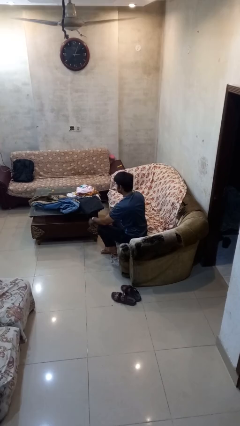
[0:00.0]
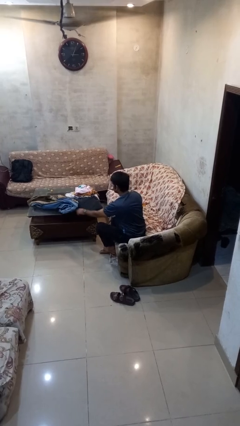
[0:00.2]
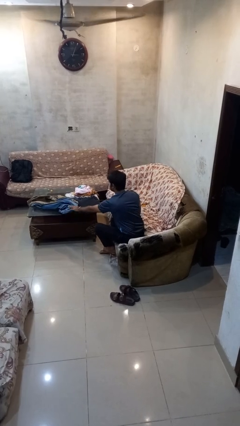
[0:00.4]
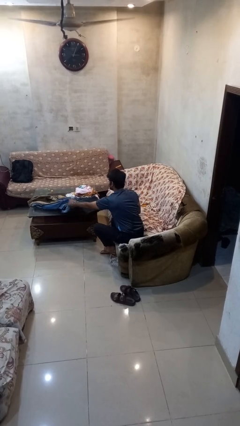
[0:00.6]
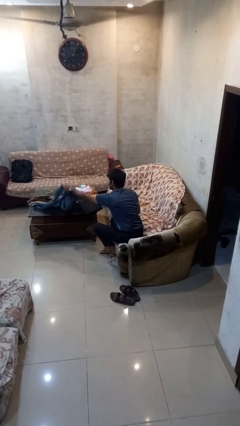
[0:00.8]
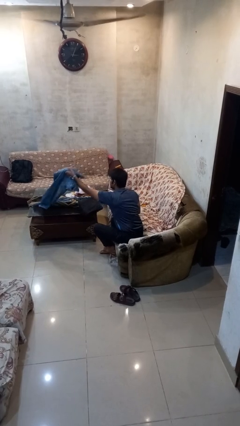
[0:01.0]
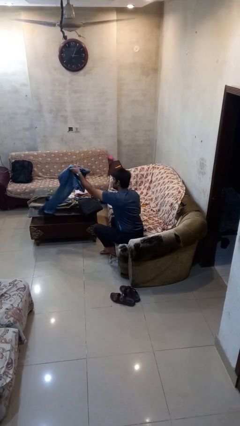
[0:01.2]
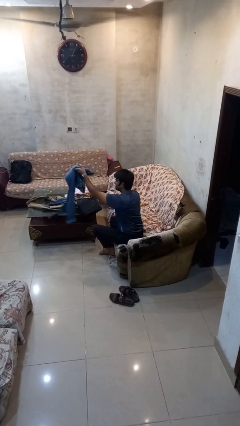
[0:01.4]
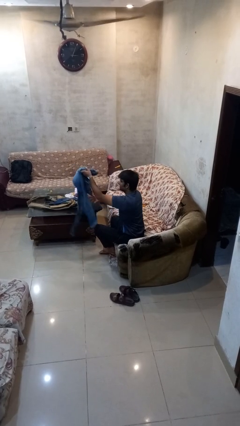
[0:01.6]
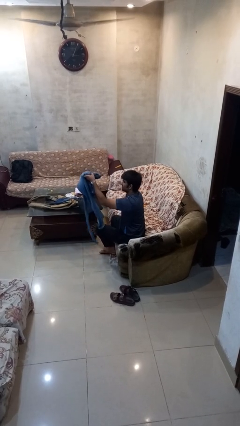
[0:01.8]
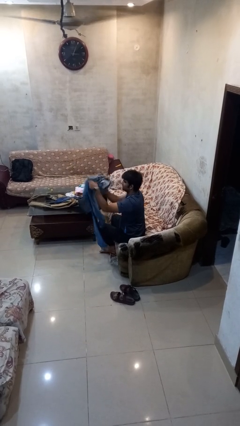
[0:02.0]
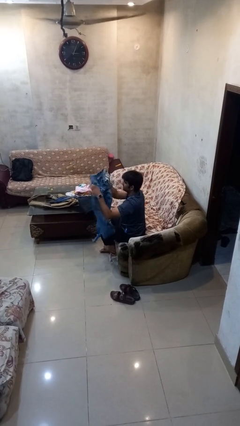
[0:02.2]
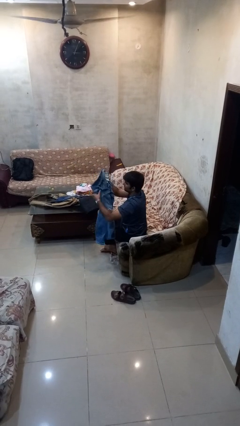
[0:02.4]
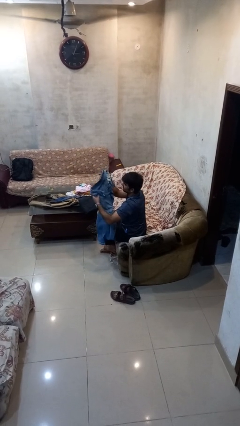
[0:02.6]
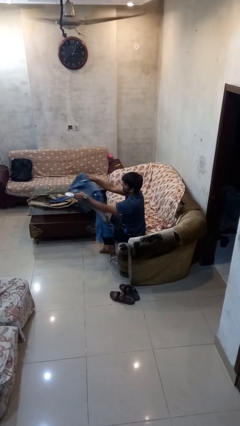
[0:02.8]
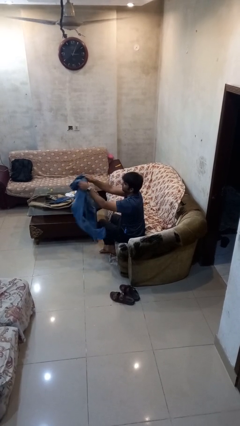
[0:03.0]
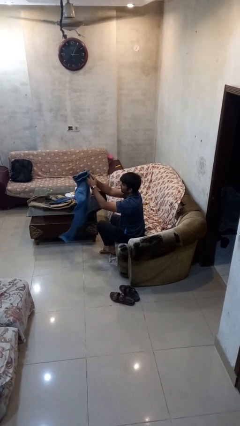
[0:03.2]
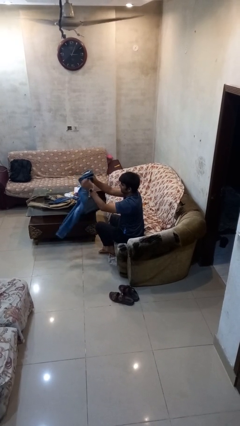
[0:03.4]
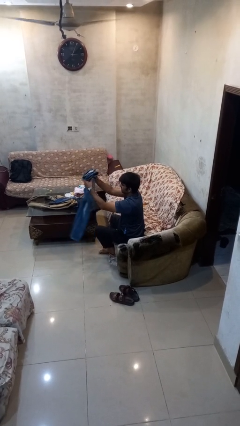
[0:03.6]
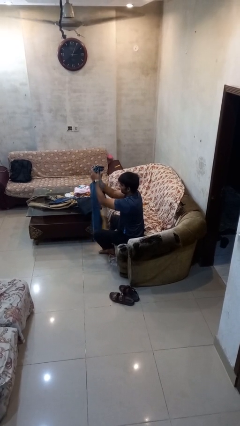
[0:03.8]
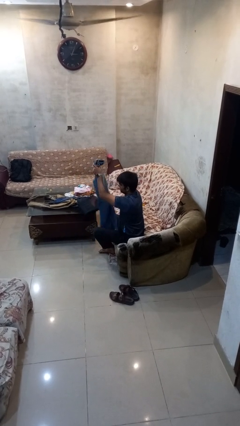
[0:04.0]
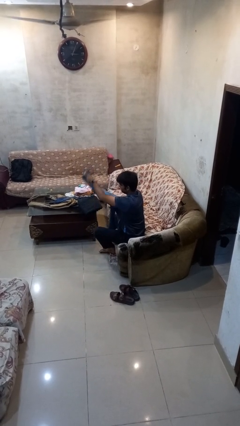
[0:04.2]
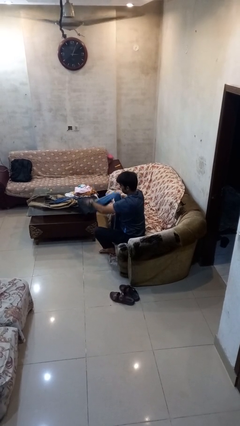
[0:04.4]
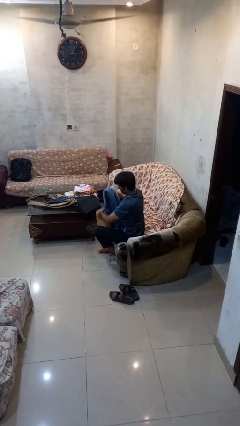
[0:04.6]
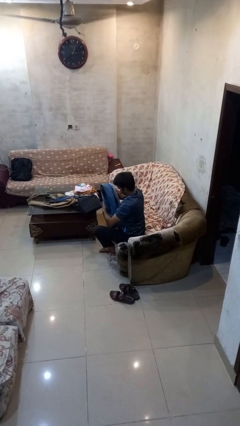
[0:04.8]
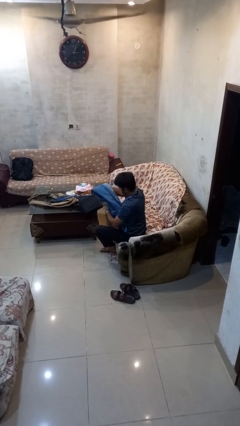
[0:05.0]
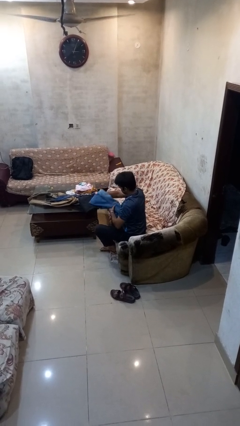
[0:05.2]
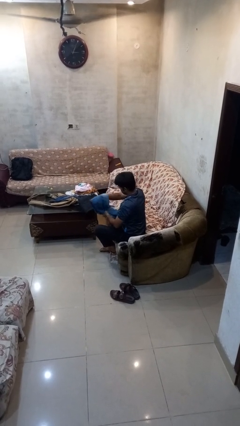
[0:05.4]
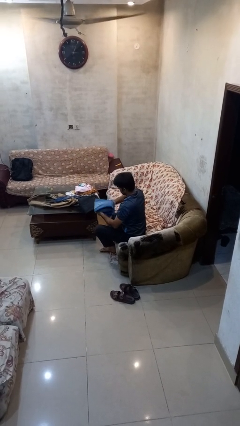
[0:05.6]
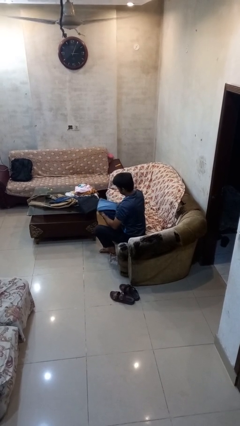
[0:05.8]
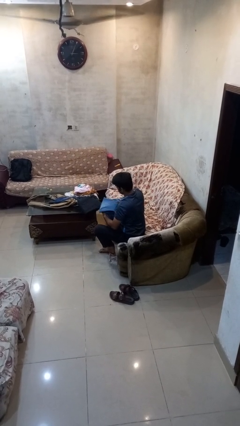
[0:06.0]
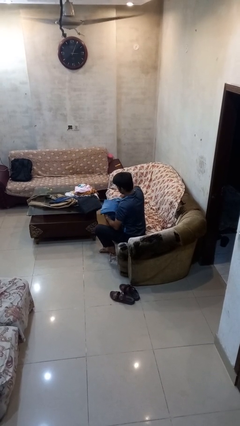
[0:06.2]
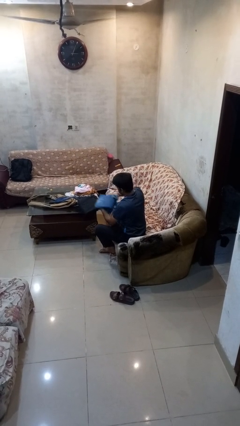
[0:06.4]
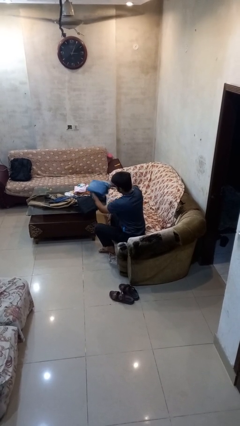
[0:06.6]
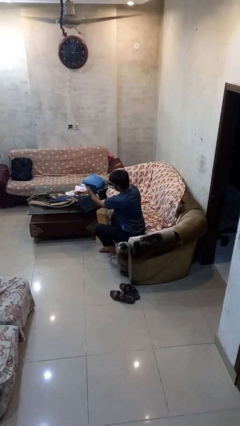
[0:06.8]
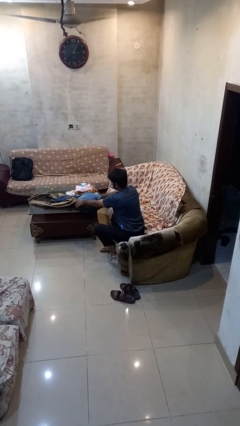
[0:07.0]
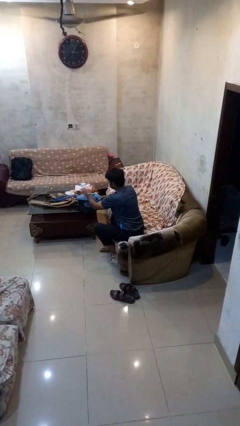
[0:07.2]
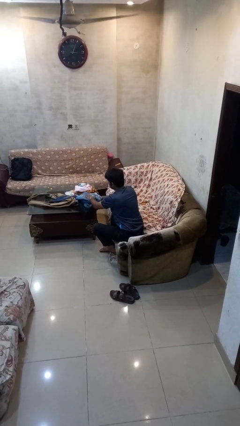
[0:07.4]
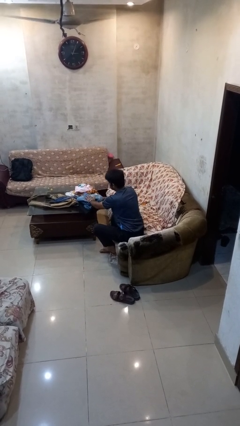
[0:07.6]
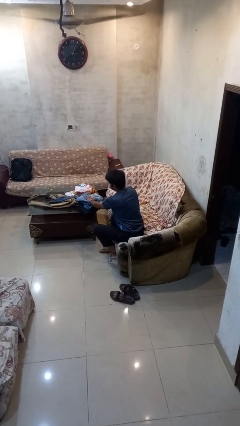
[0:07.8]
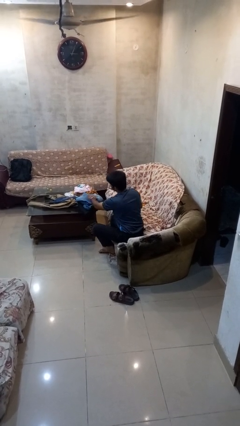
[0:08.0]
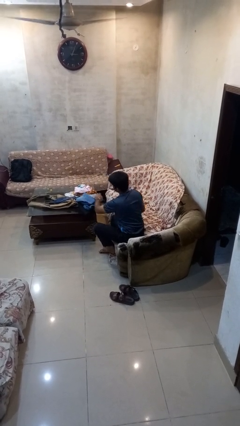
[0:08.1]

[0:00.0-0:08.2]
person folds pants

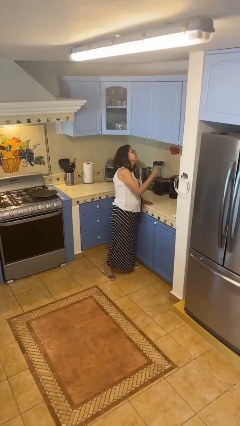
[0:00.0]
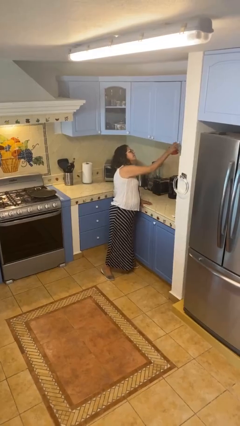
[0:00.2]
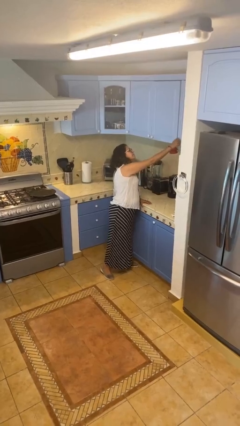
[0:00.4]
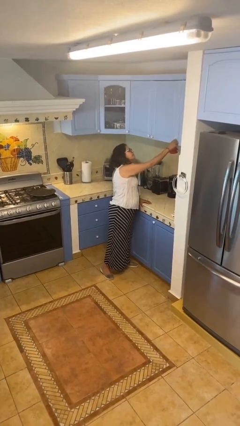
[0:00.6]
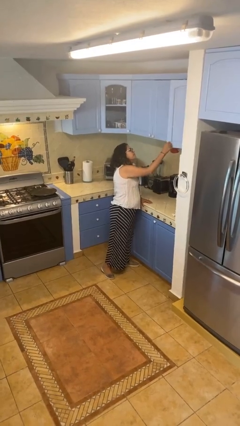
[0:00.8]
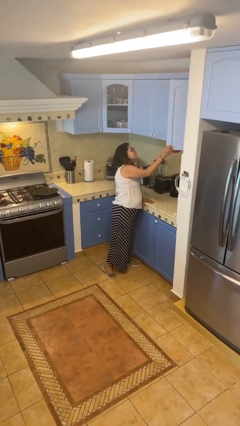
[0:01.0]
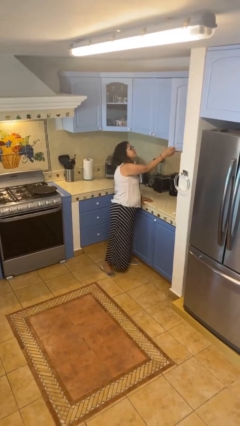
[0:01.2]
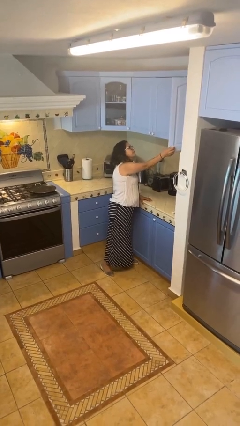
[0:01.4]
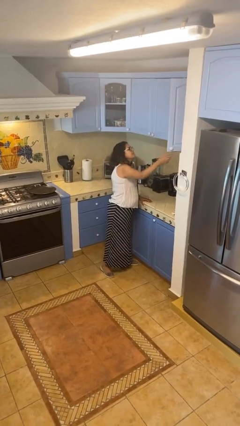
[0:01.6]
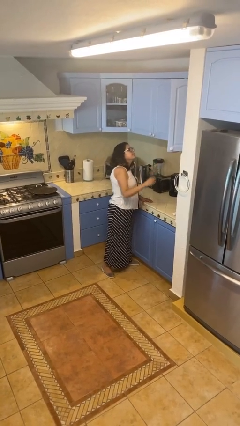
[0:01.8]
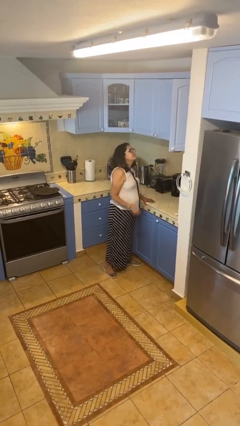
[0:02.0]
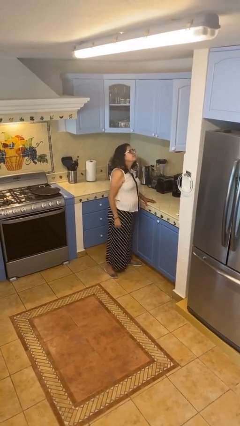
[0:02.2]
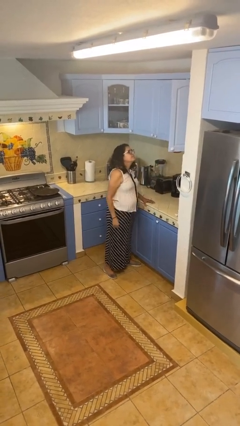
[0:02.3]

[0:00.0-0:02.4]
person opens cabinet

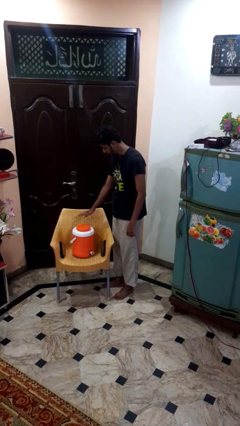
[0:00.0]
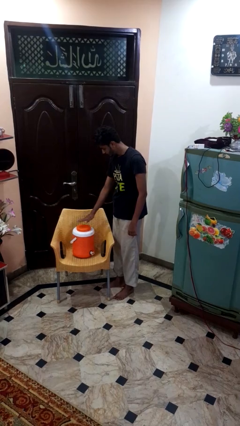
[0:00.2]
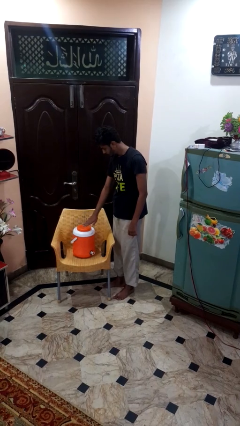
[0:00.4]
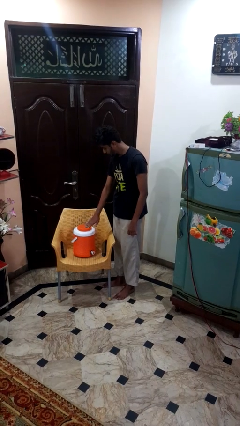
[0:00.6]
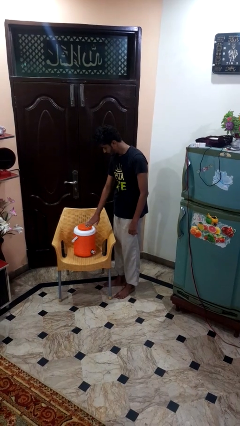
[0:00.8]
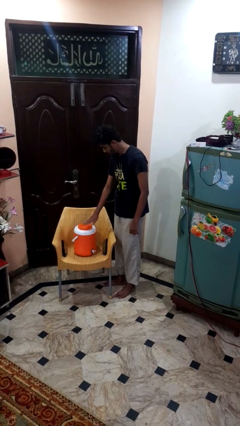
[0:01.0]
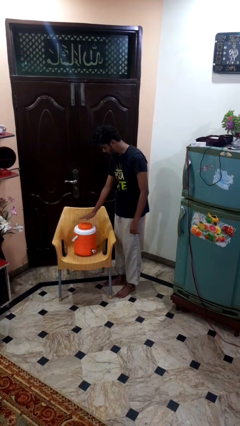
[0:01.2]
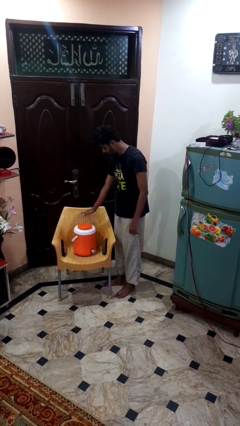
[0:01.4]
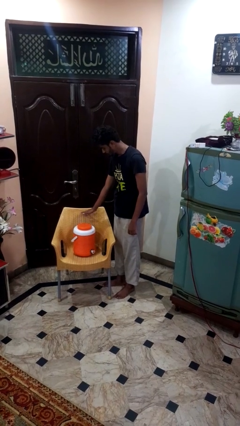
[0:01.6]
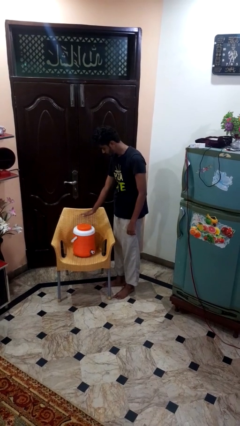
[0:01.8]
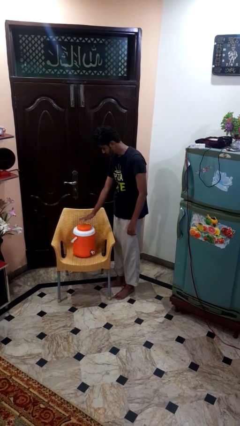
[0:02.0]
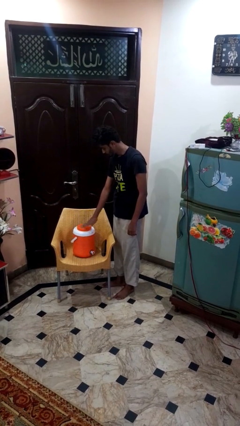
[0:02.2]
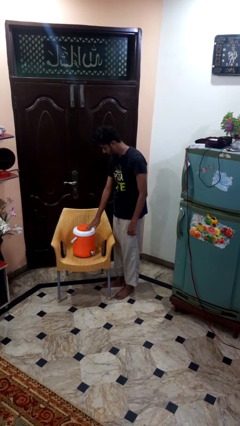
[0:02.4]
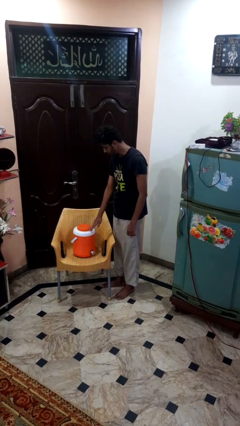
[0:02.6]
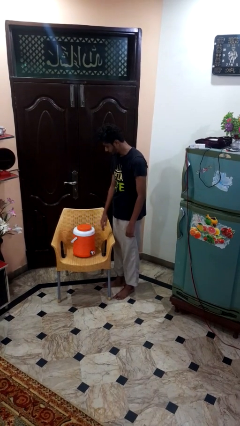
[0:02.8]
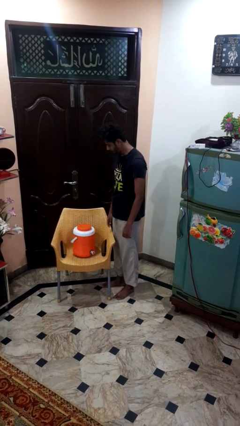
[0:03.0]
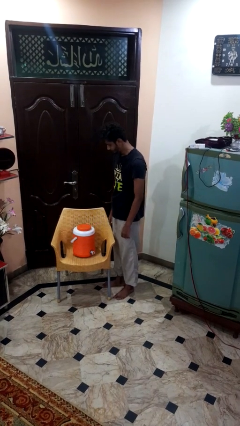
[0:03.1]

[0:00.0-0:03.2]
person waves hand over object

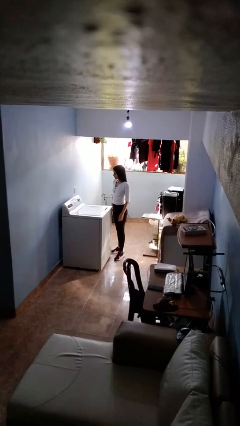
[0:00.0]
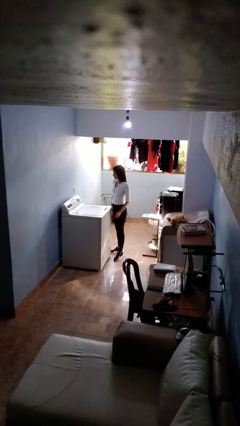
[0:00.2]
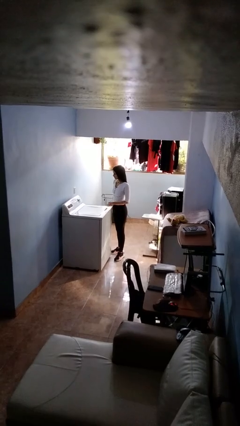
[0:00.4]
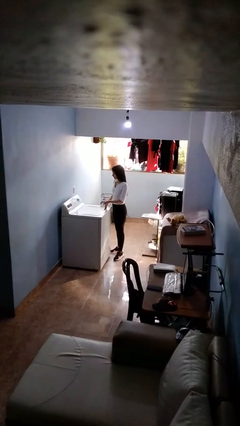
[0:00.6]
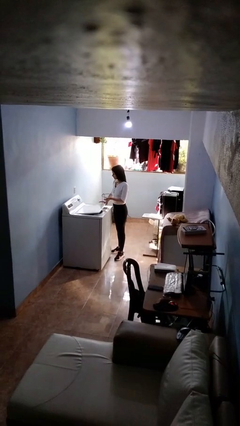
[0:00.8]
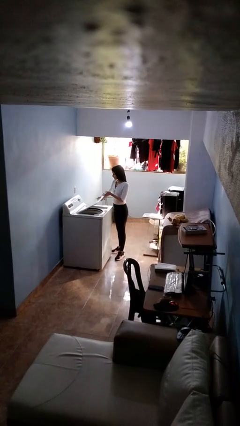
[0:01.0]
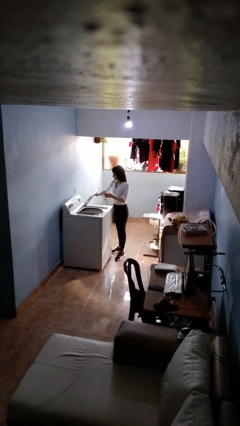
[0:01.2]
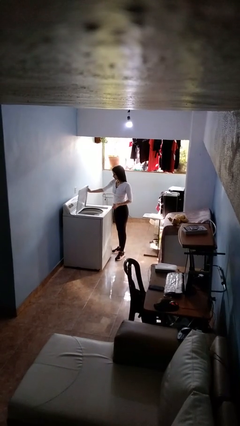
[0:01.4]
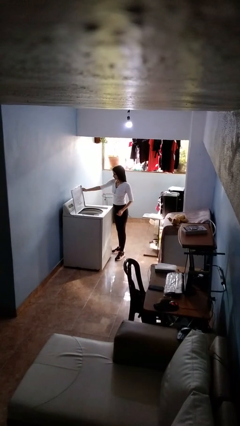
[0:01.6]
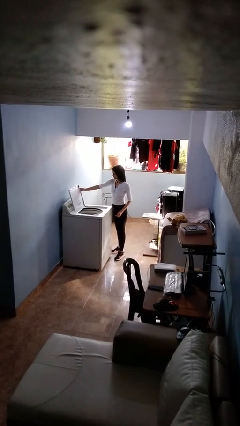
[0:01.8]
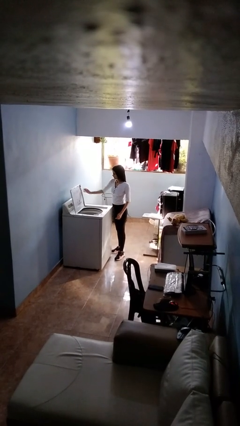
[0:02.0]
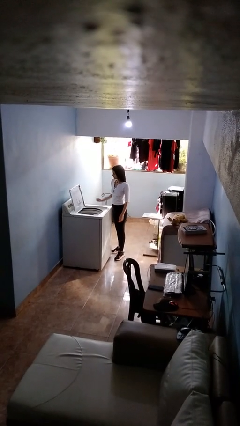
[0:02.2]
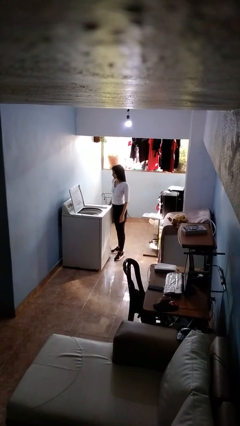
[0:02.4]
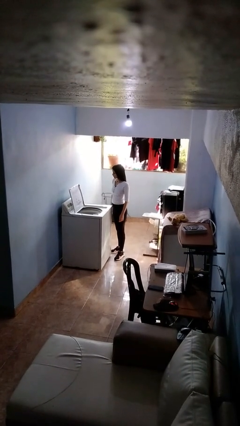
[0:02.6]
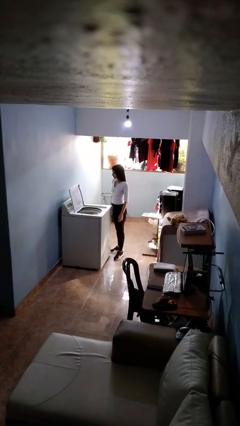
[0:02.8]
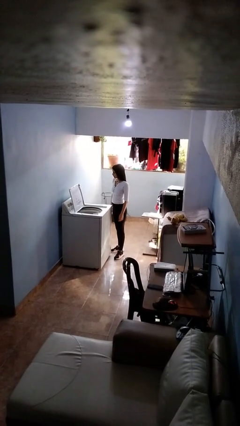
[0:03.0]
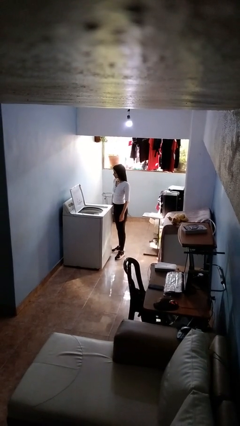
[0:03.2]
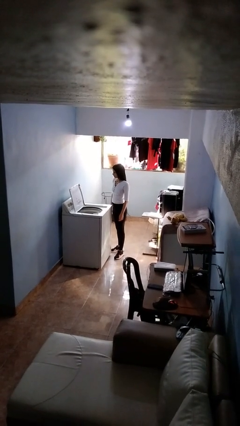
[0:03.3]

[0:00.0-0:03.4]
person opens clothes washer

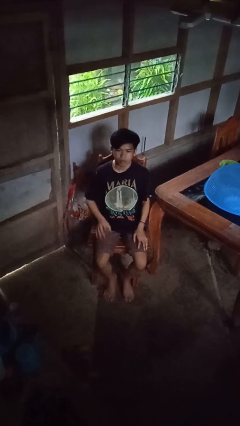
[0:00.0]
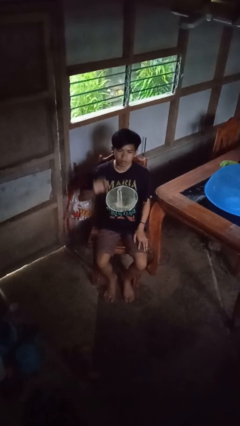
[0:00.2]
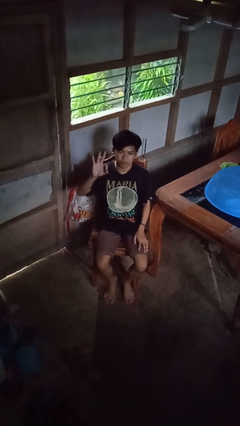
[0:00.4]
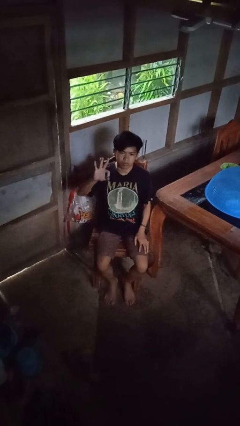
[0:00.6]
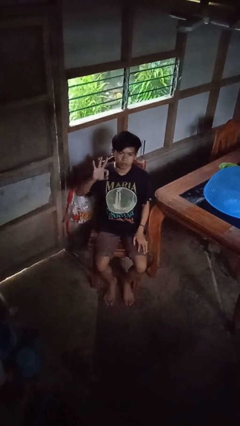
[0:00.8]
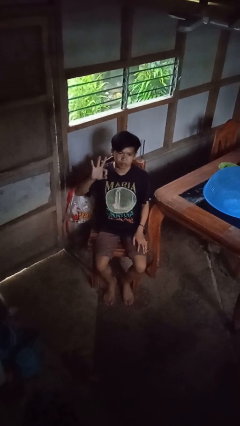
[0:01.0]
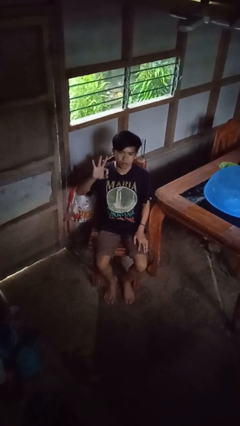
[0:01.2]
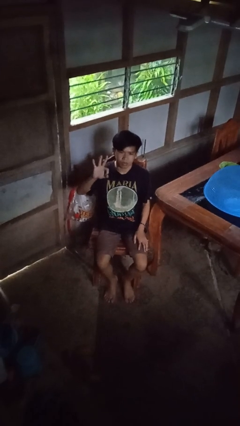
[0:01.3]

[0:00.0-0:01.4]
person gestures number three
